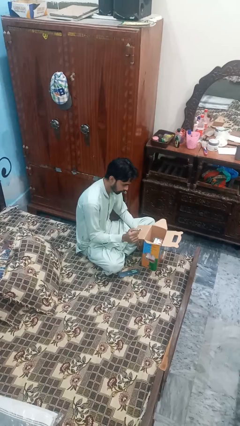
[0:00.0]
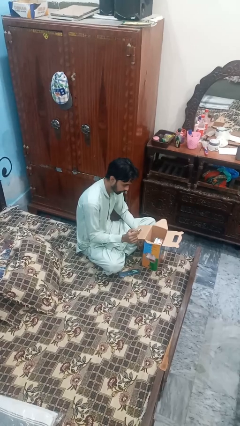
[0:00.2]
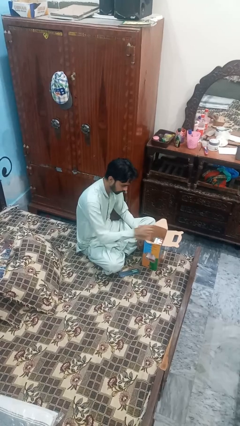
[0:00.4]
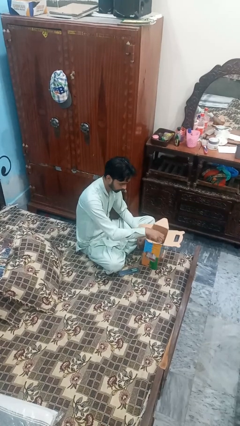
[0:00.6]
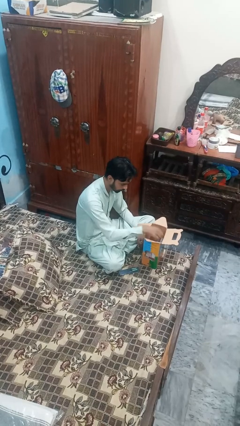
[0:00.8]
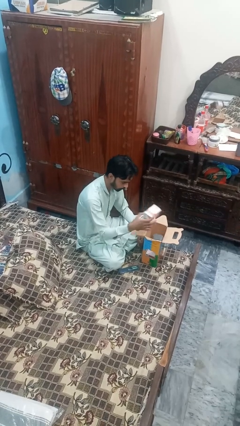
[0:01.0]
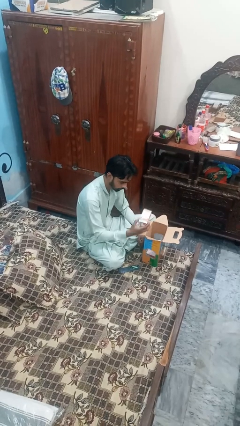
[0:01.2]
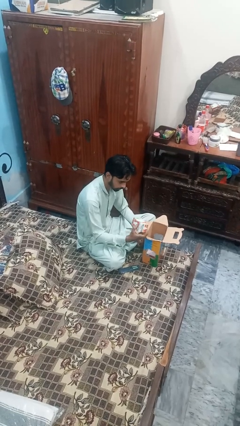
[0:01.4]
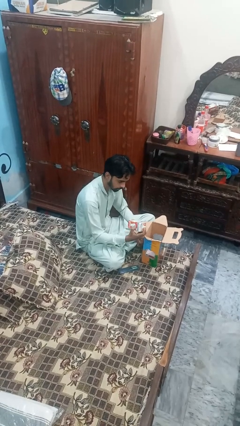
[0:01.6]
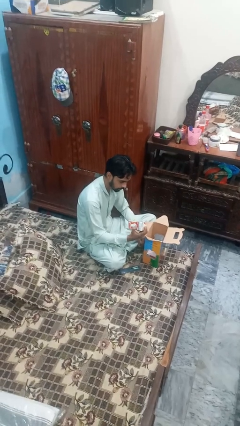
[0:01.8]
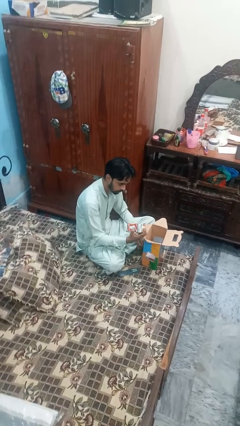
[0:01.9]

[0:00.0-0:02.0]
person takes object from box

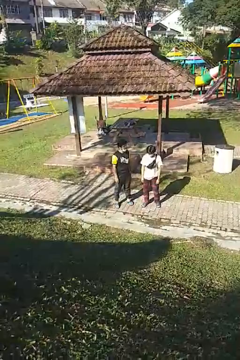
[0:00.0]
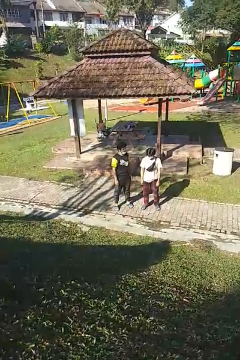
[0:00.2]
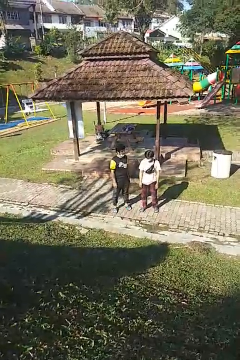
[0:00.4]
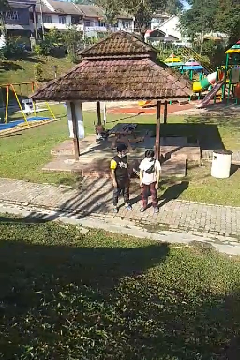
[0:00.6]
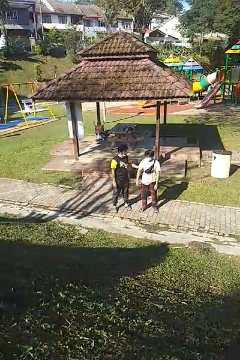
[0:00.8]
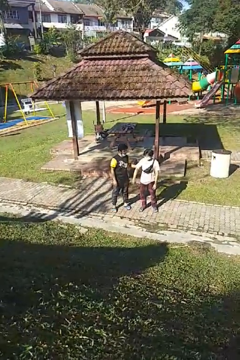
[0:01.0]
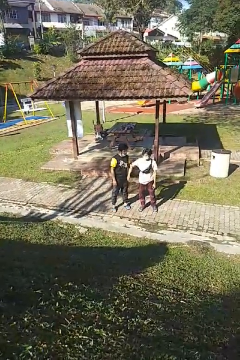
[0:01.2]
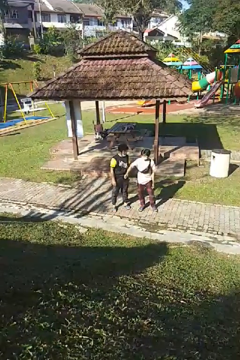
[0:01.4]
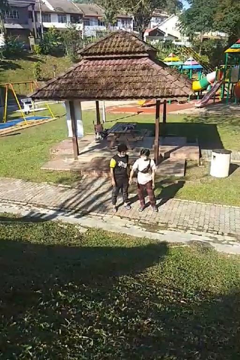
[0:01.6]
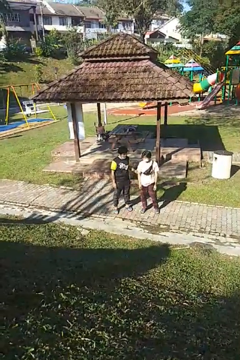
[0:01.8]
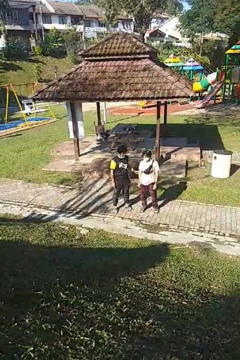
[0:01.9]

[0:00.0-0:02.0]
person grabs person by hair

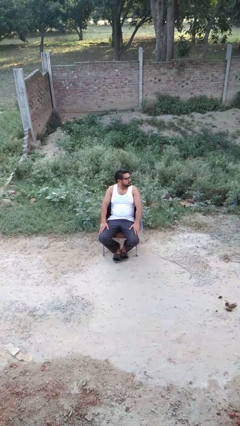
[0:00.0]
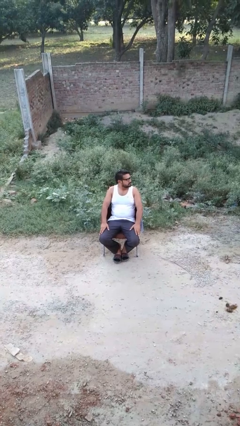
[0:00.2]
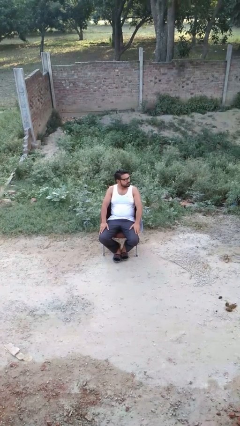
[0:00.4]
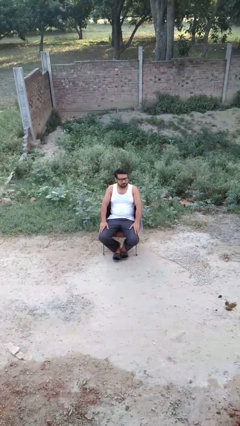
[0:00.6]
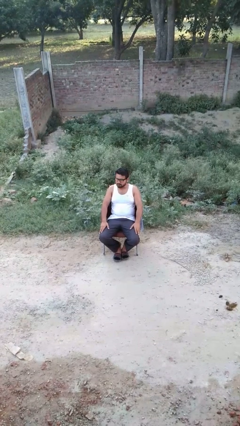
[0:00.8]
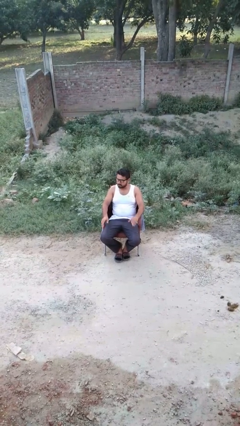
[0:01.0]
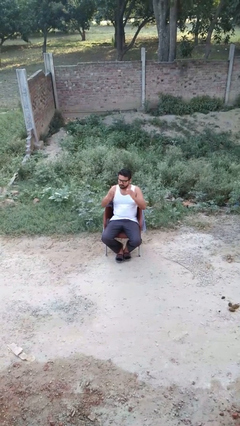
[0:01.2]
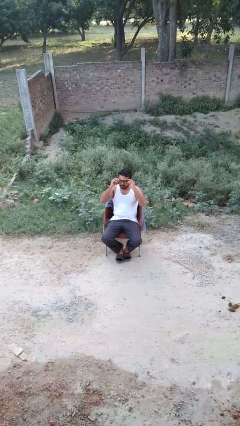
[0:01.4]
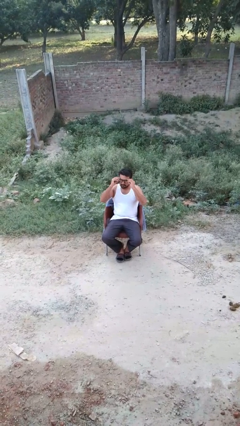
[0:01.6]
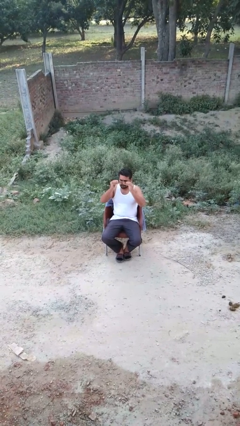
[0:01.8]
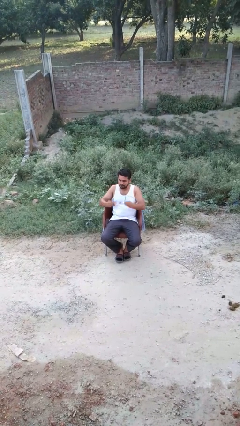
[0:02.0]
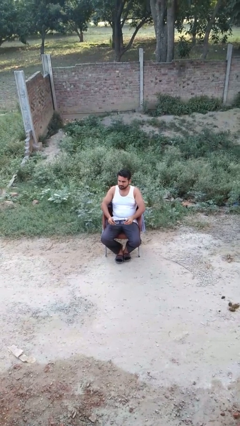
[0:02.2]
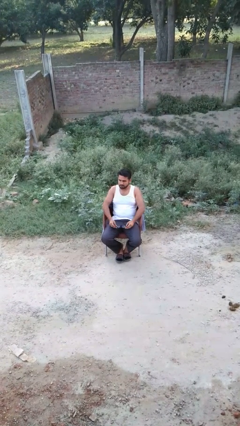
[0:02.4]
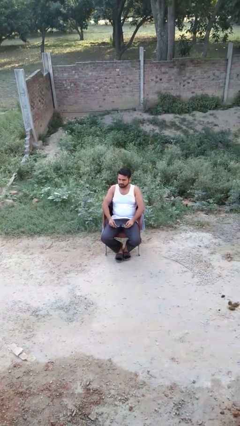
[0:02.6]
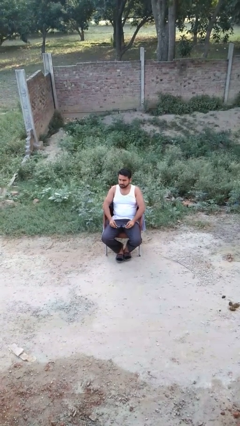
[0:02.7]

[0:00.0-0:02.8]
person takes off glasses

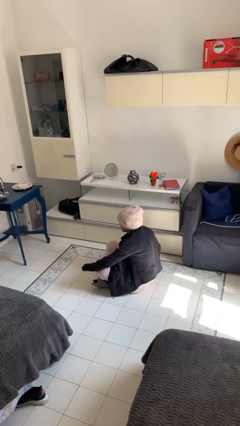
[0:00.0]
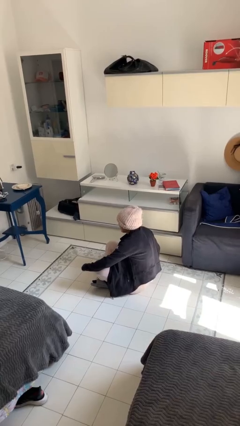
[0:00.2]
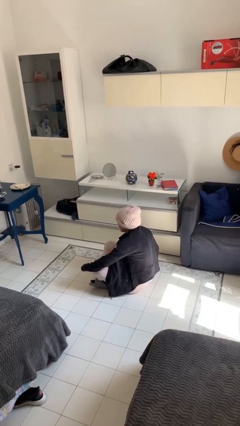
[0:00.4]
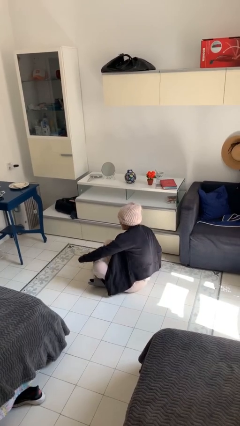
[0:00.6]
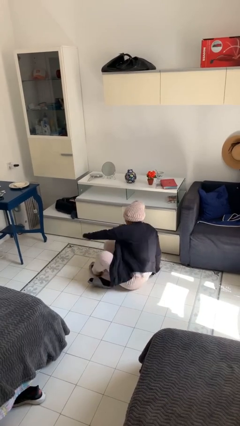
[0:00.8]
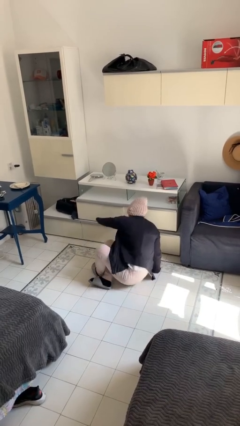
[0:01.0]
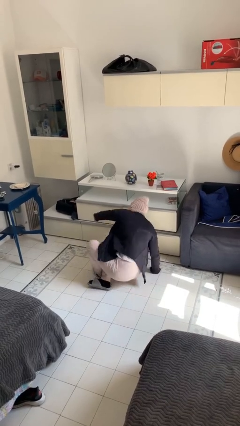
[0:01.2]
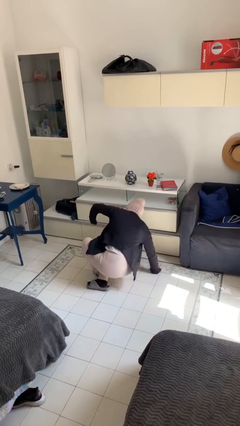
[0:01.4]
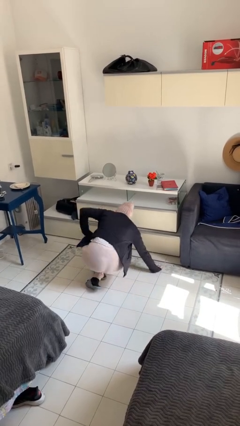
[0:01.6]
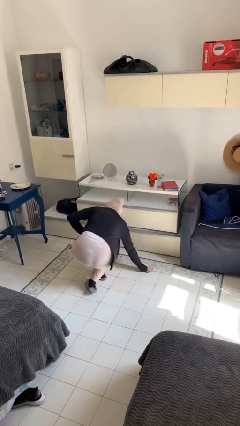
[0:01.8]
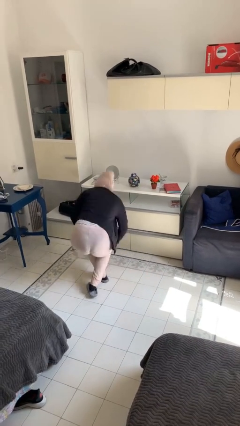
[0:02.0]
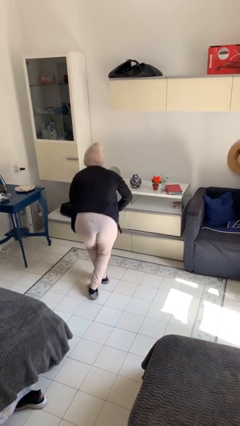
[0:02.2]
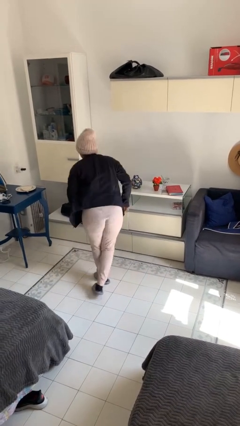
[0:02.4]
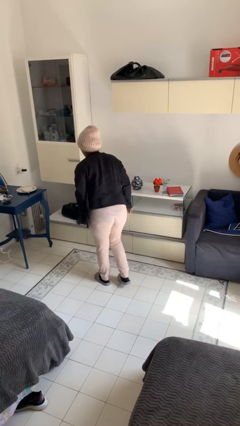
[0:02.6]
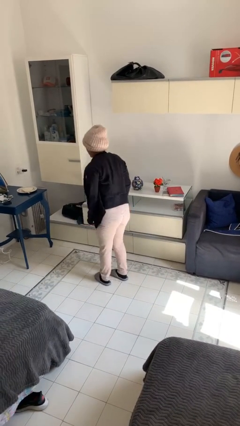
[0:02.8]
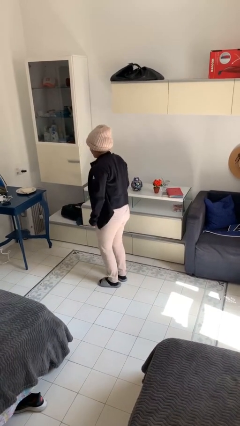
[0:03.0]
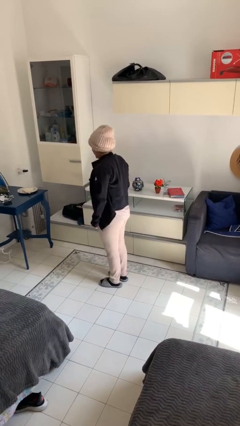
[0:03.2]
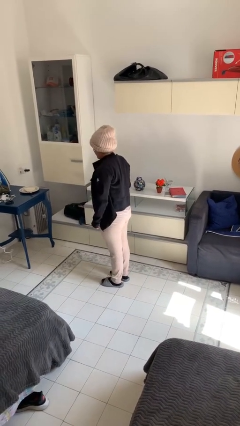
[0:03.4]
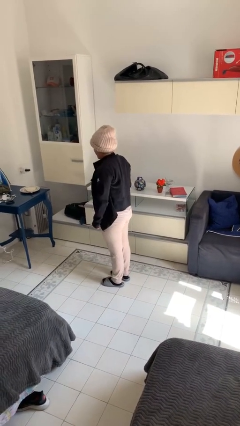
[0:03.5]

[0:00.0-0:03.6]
person stands up from floor

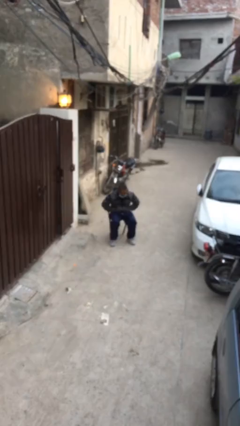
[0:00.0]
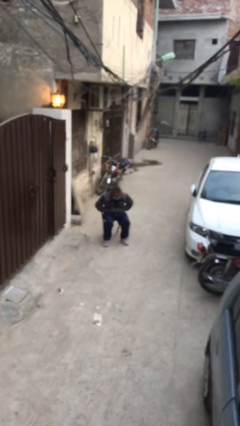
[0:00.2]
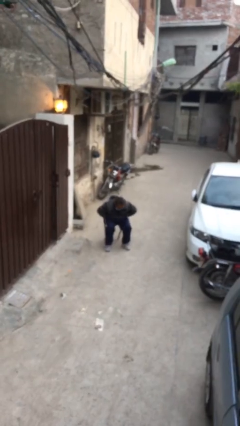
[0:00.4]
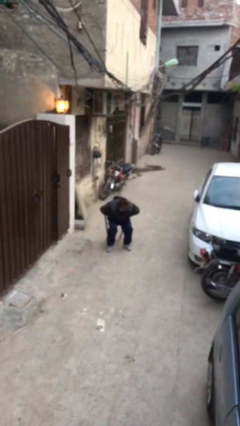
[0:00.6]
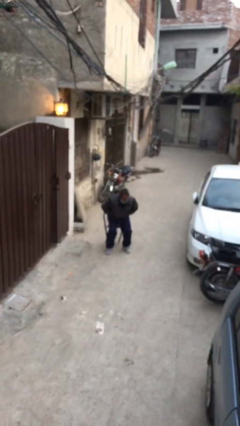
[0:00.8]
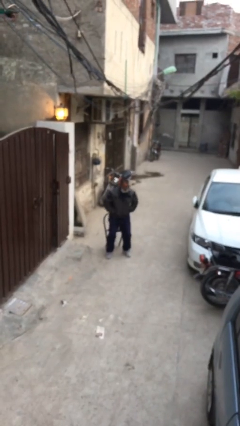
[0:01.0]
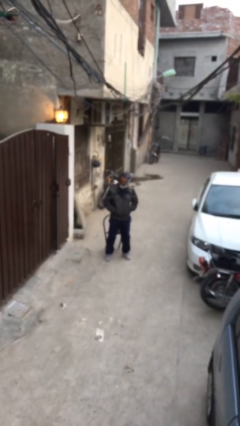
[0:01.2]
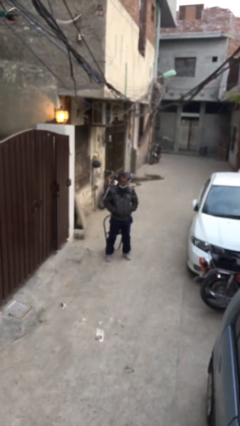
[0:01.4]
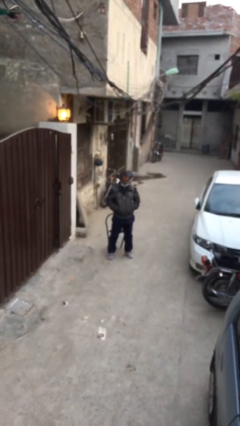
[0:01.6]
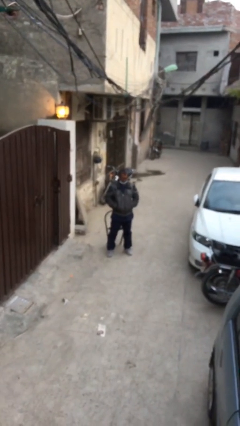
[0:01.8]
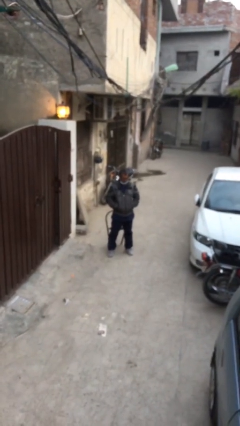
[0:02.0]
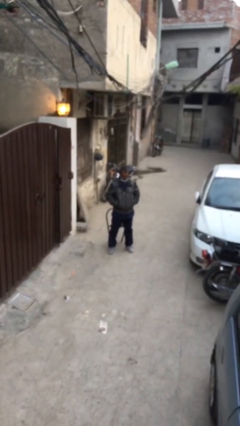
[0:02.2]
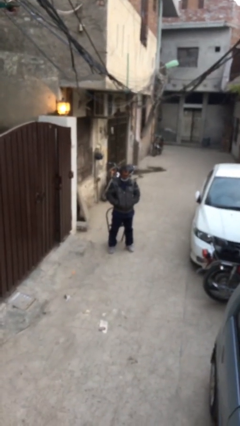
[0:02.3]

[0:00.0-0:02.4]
person stands up

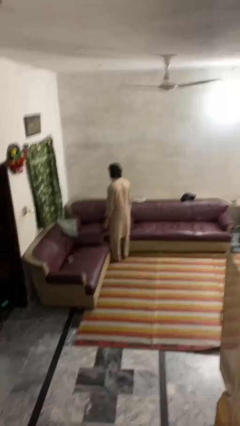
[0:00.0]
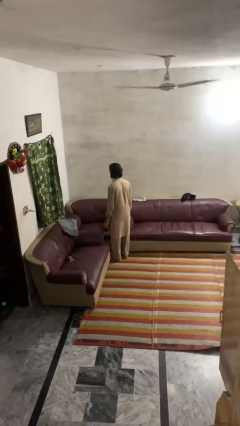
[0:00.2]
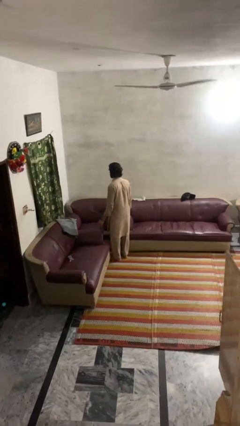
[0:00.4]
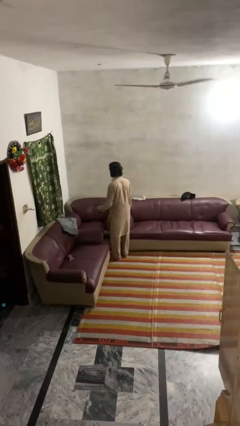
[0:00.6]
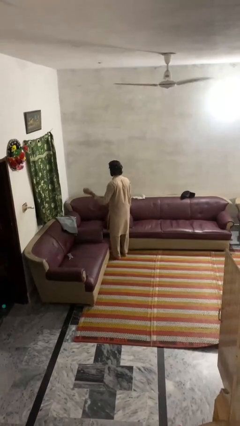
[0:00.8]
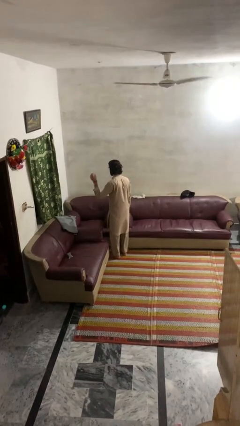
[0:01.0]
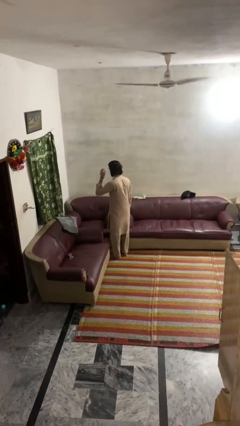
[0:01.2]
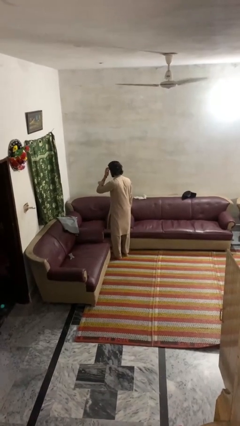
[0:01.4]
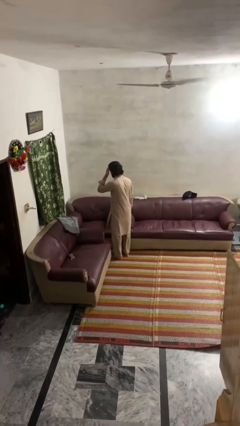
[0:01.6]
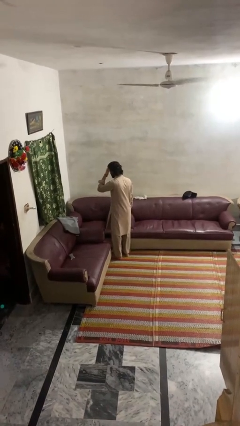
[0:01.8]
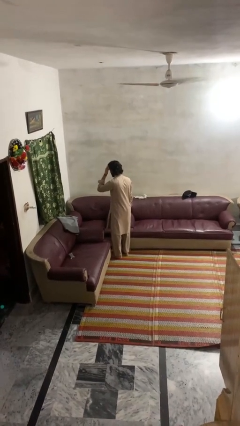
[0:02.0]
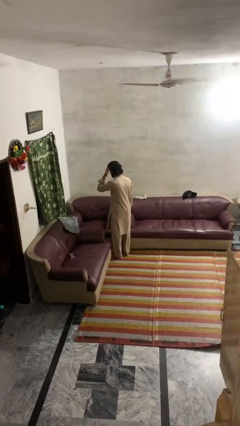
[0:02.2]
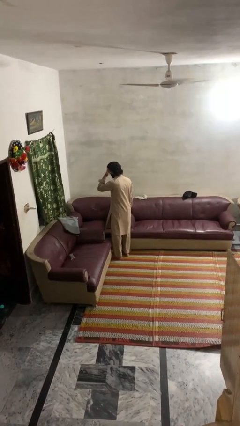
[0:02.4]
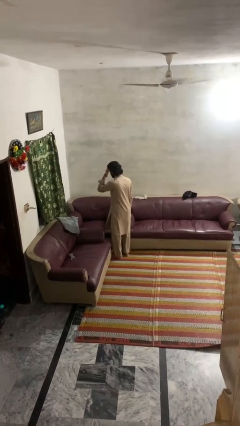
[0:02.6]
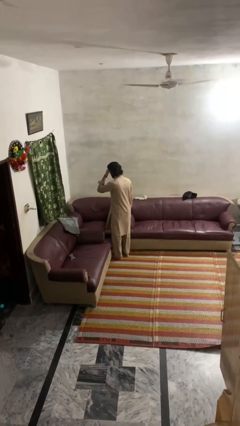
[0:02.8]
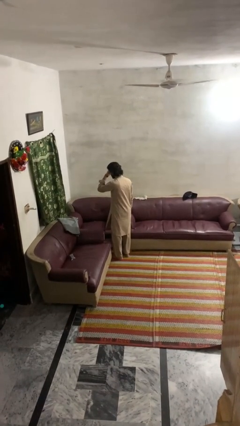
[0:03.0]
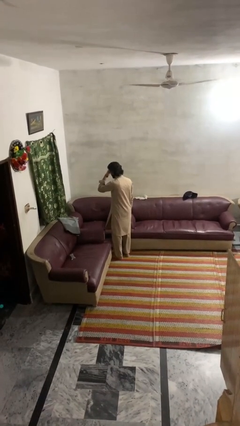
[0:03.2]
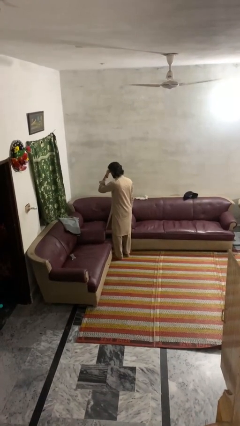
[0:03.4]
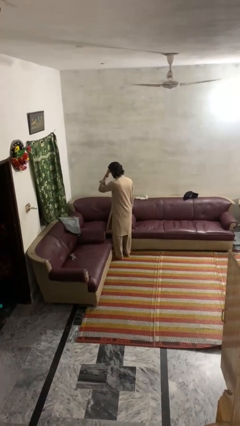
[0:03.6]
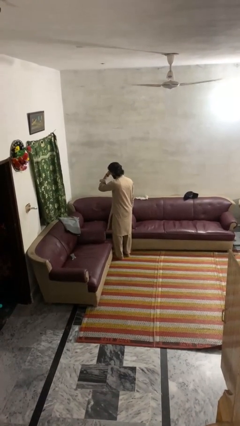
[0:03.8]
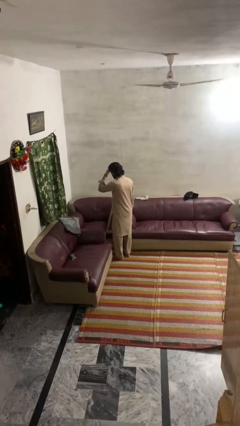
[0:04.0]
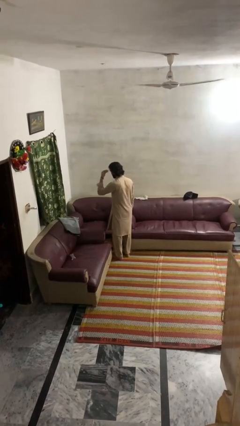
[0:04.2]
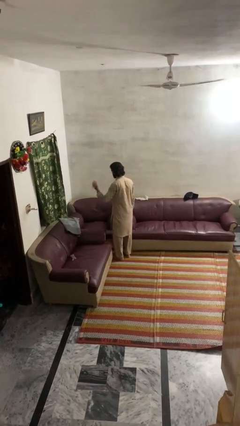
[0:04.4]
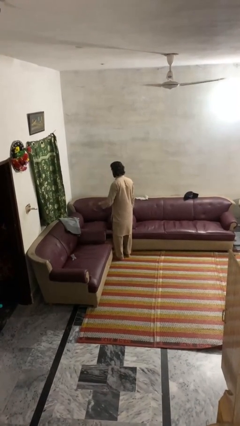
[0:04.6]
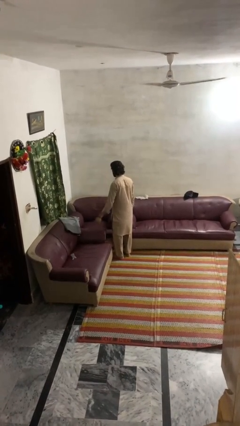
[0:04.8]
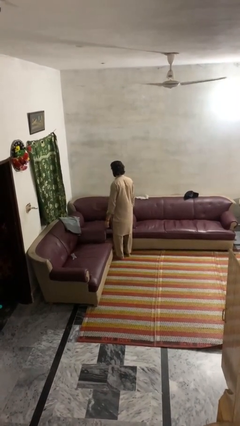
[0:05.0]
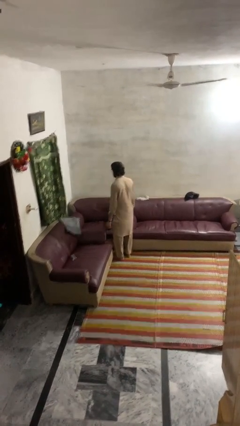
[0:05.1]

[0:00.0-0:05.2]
person scratches face
